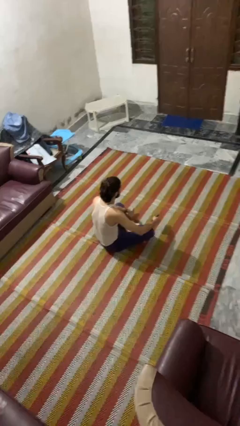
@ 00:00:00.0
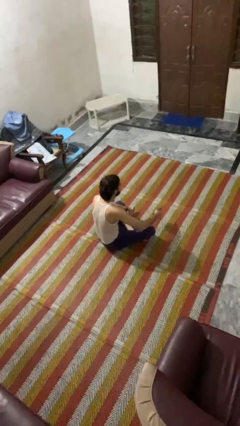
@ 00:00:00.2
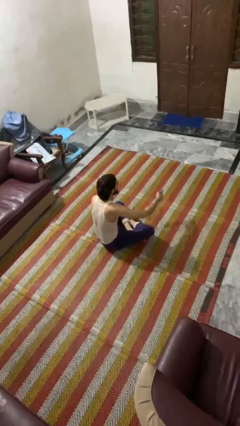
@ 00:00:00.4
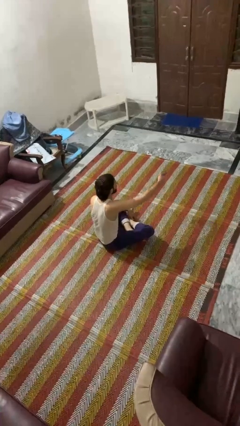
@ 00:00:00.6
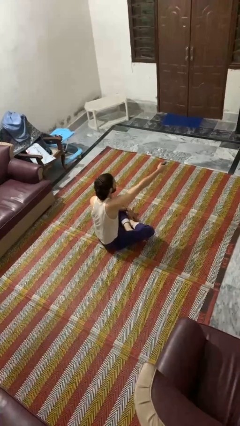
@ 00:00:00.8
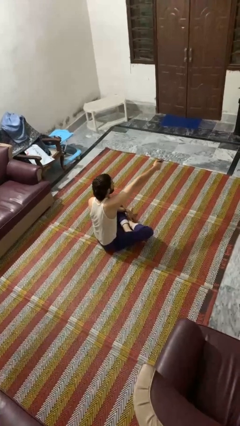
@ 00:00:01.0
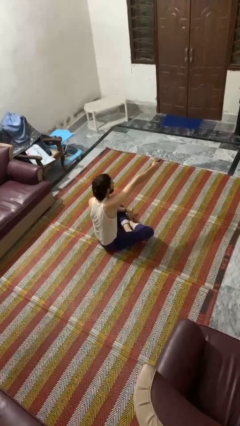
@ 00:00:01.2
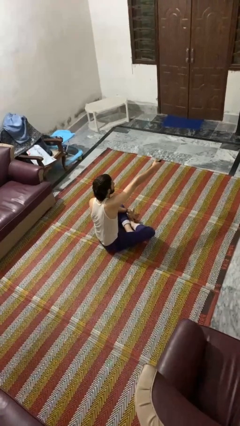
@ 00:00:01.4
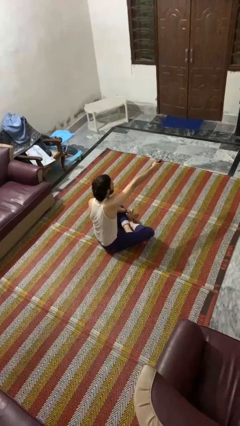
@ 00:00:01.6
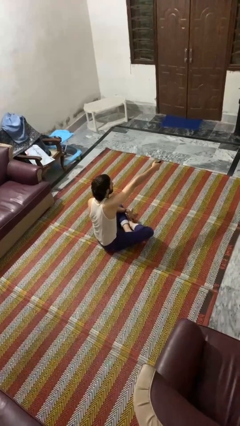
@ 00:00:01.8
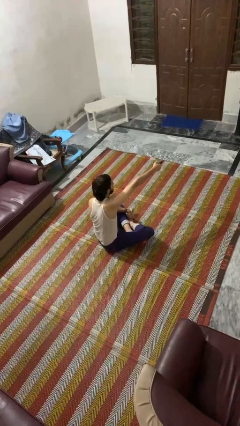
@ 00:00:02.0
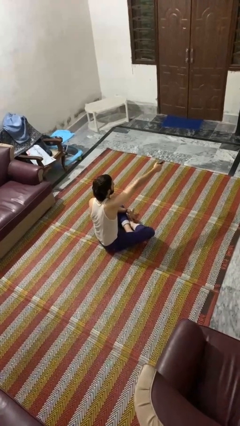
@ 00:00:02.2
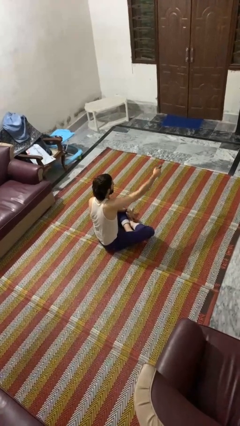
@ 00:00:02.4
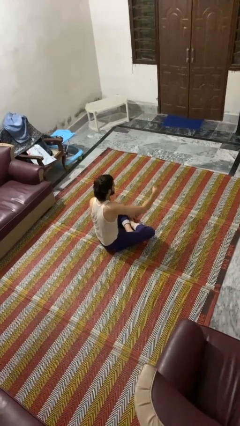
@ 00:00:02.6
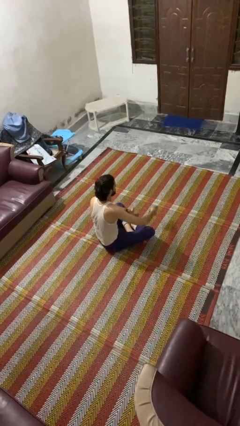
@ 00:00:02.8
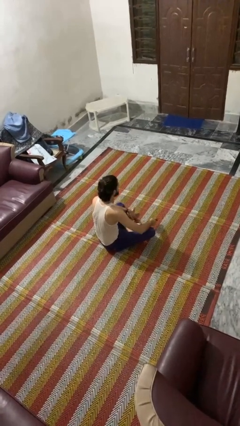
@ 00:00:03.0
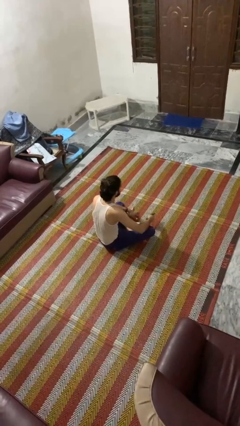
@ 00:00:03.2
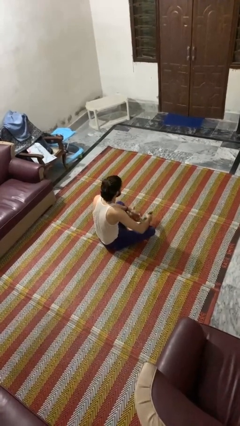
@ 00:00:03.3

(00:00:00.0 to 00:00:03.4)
person uses television remote

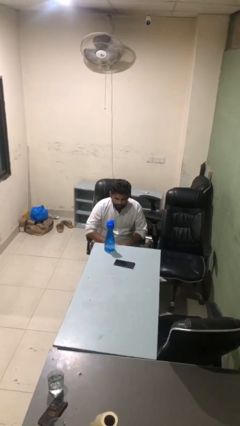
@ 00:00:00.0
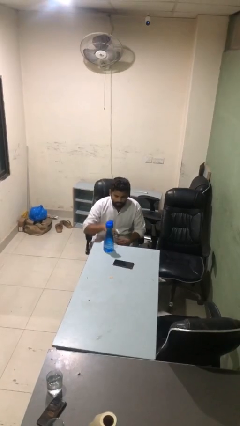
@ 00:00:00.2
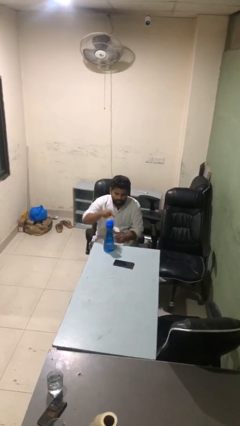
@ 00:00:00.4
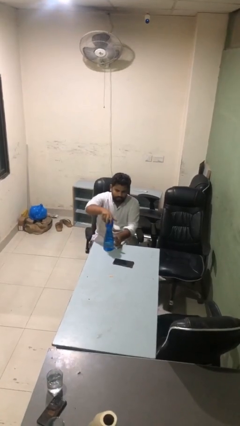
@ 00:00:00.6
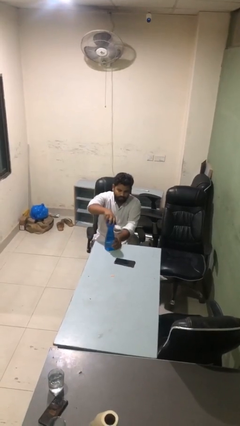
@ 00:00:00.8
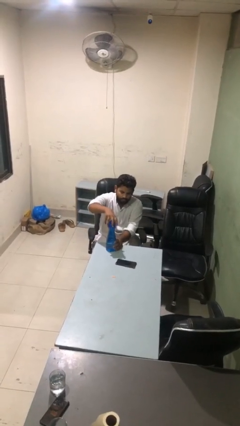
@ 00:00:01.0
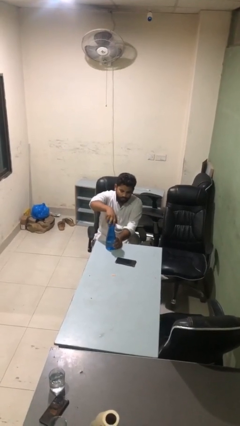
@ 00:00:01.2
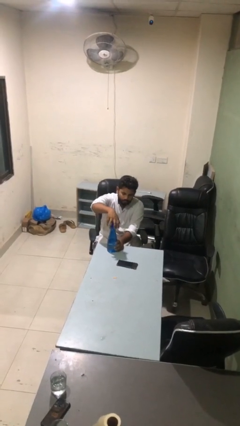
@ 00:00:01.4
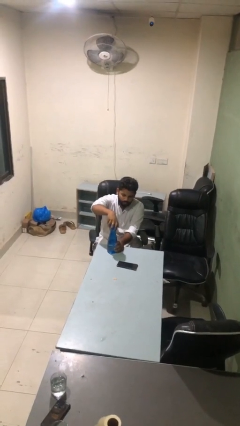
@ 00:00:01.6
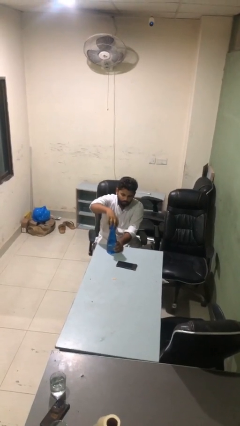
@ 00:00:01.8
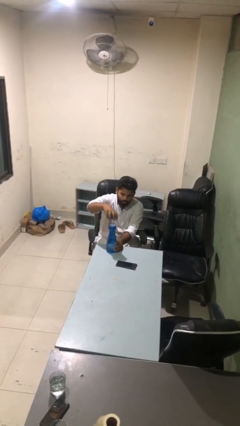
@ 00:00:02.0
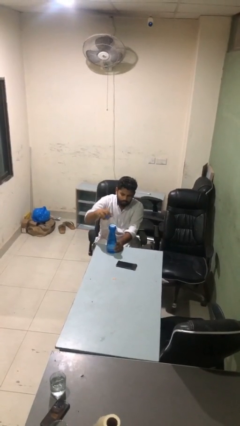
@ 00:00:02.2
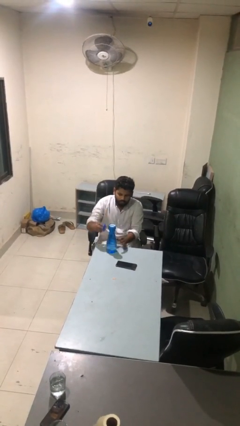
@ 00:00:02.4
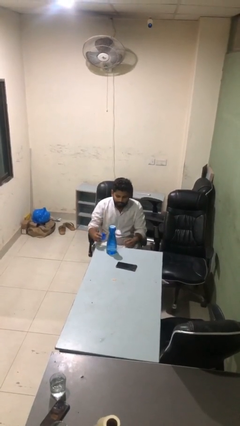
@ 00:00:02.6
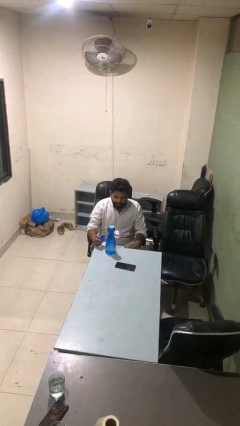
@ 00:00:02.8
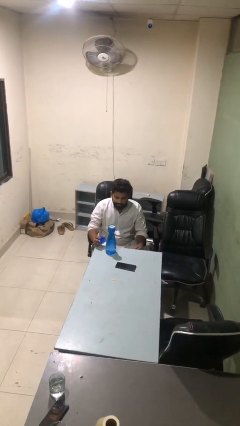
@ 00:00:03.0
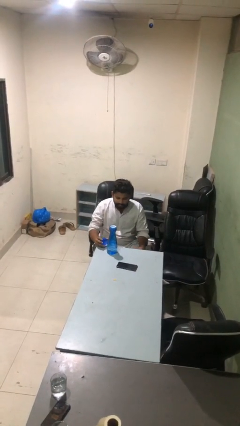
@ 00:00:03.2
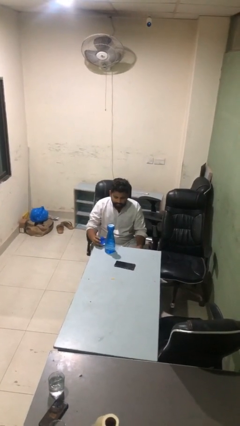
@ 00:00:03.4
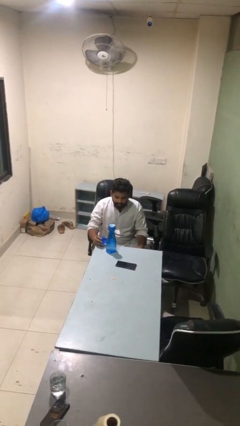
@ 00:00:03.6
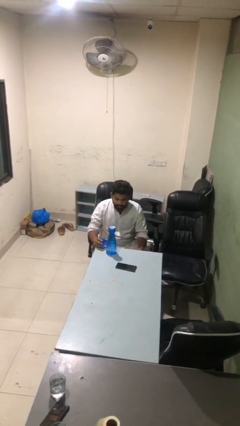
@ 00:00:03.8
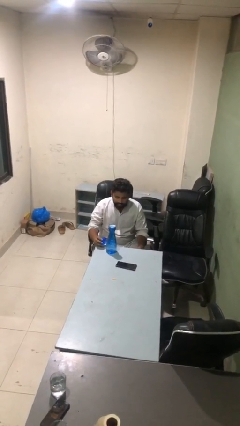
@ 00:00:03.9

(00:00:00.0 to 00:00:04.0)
person unscrews lid from bottle

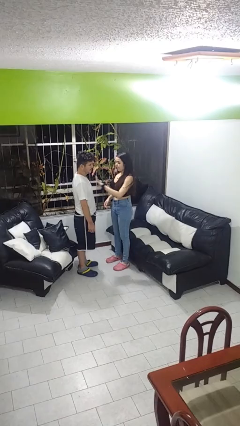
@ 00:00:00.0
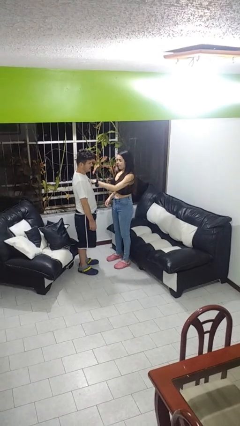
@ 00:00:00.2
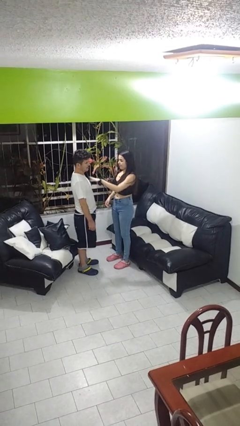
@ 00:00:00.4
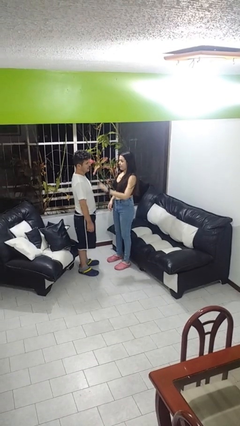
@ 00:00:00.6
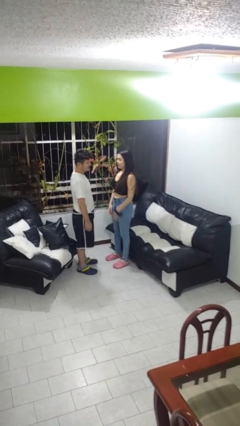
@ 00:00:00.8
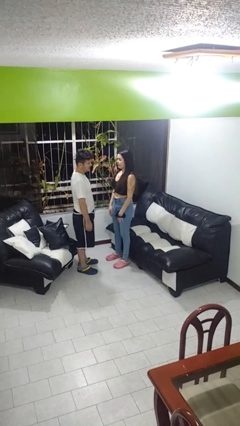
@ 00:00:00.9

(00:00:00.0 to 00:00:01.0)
person shoves person

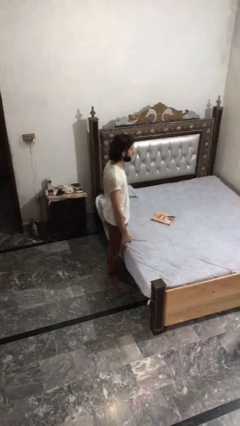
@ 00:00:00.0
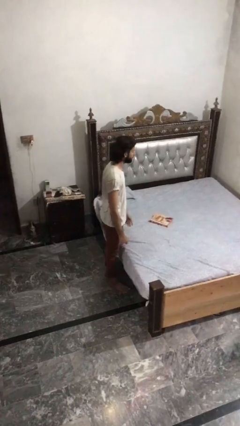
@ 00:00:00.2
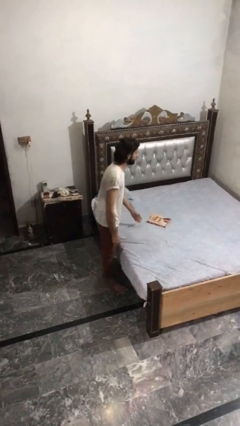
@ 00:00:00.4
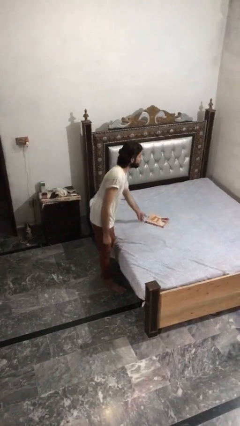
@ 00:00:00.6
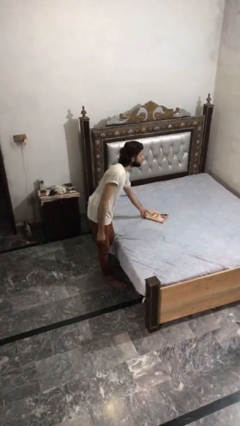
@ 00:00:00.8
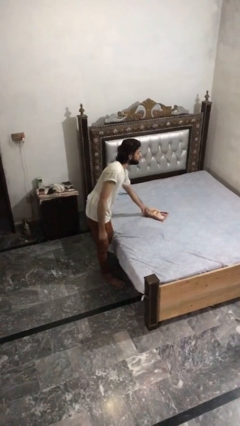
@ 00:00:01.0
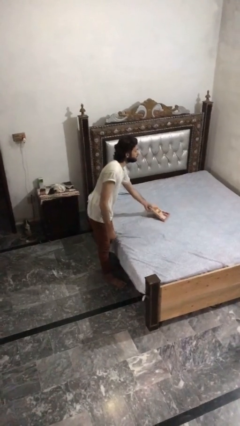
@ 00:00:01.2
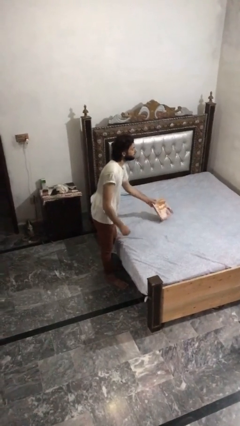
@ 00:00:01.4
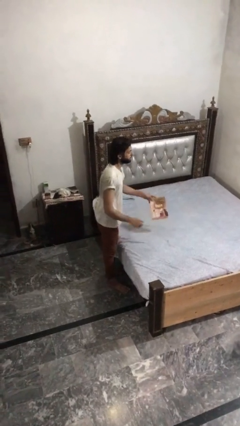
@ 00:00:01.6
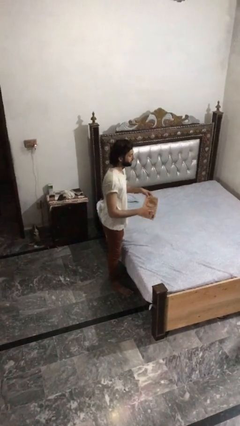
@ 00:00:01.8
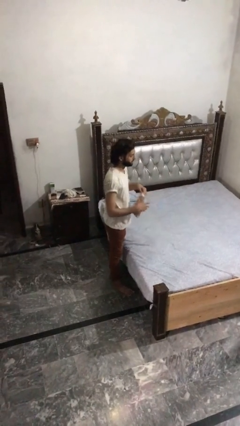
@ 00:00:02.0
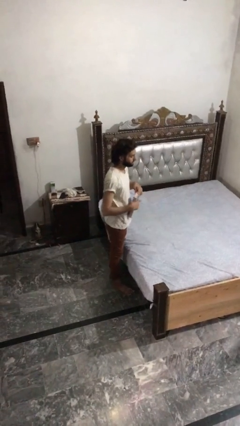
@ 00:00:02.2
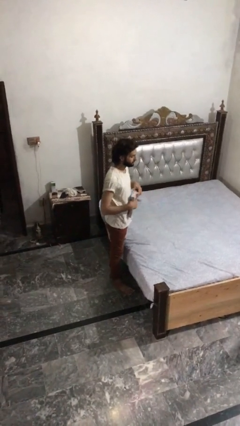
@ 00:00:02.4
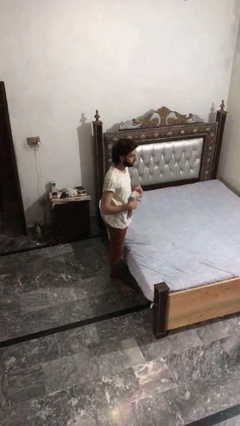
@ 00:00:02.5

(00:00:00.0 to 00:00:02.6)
person picks up object from bed

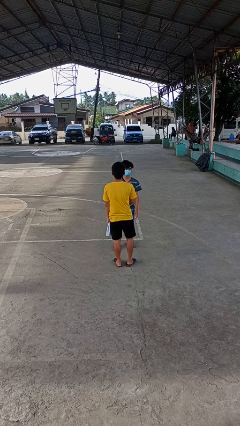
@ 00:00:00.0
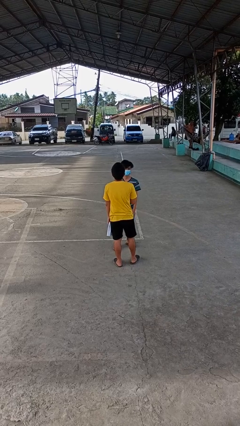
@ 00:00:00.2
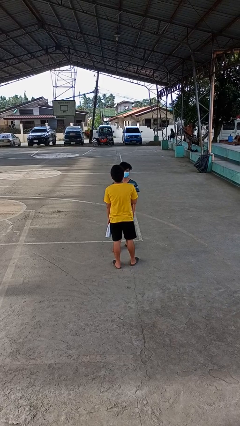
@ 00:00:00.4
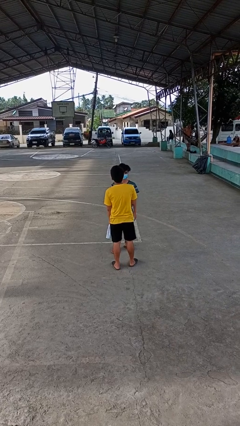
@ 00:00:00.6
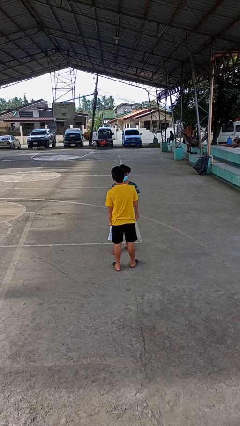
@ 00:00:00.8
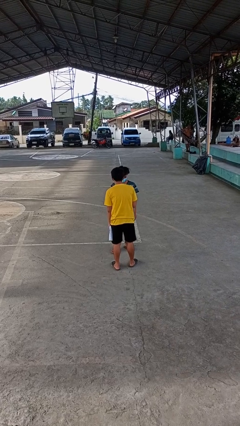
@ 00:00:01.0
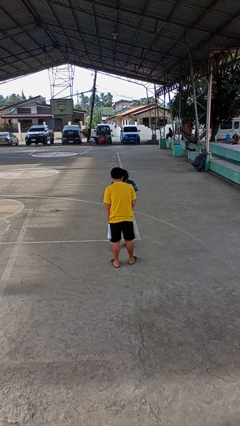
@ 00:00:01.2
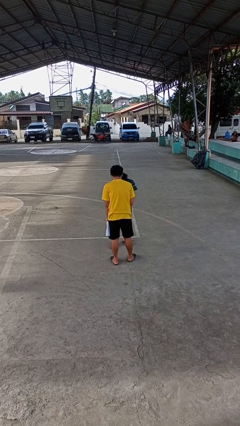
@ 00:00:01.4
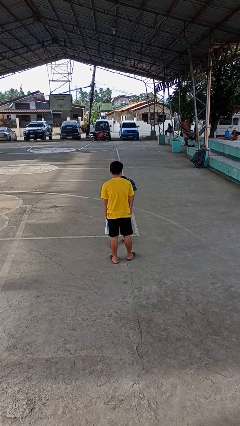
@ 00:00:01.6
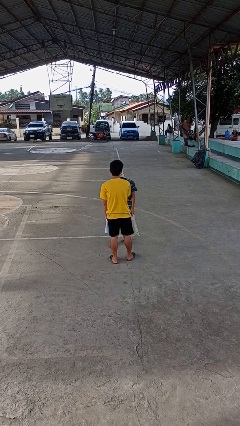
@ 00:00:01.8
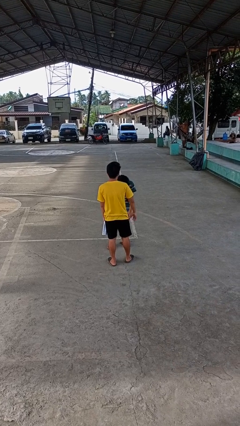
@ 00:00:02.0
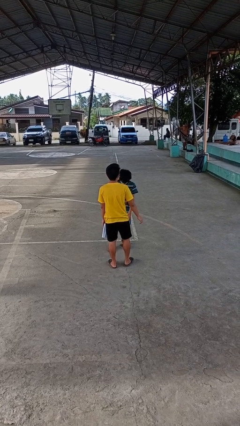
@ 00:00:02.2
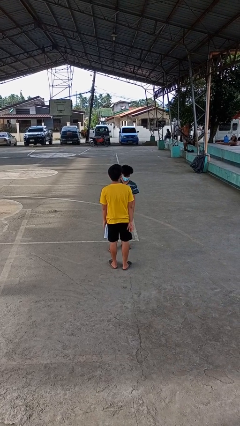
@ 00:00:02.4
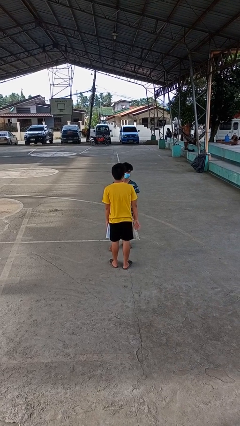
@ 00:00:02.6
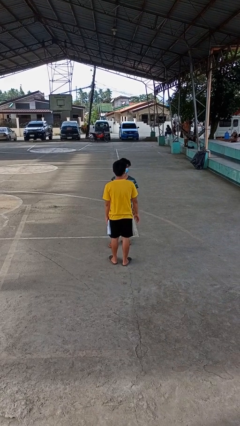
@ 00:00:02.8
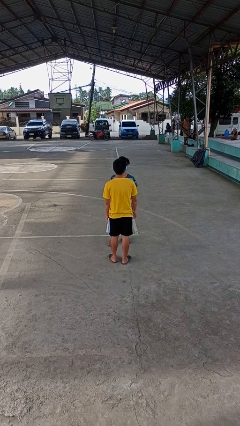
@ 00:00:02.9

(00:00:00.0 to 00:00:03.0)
person laughs with person

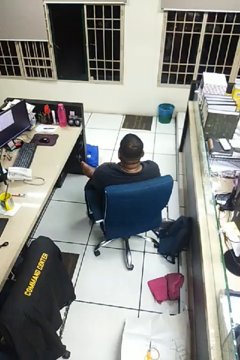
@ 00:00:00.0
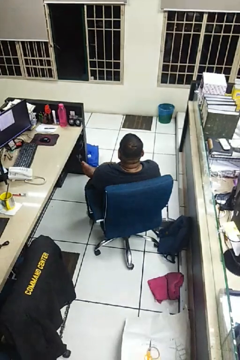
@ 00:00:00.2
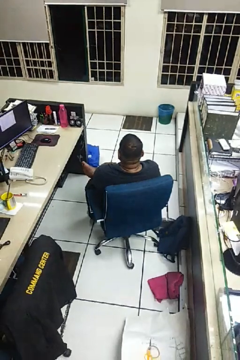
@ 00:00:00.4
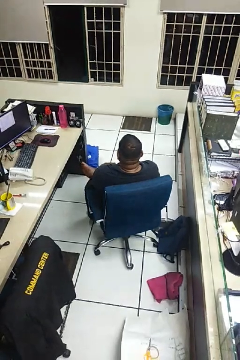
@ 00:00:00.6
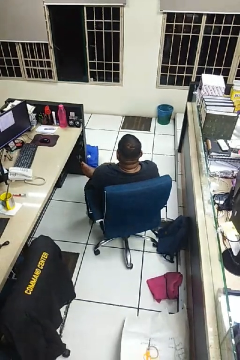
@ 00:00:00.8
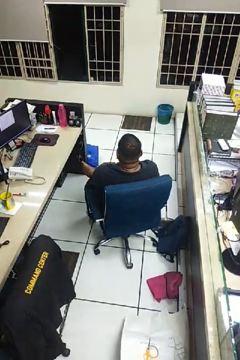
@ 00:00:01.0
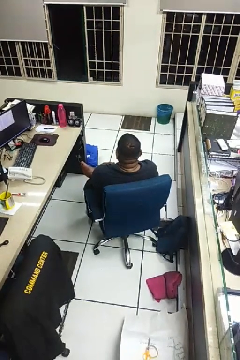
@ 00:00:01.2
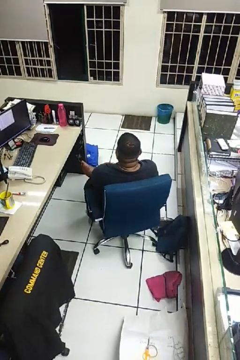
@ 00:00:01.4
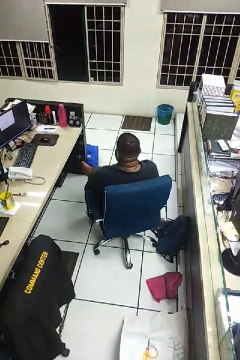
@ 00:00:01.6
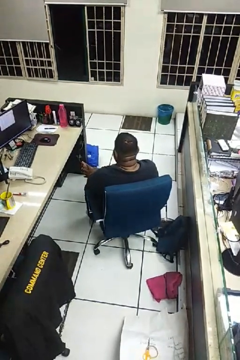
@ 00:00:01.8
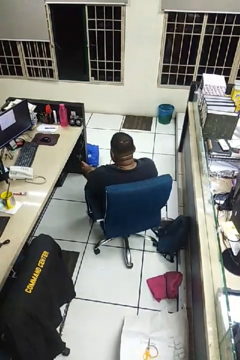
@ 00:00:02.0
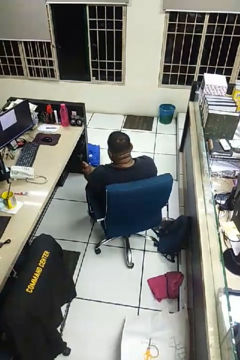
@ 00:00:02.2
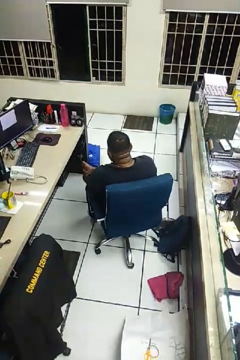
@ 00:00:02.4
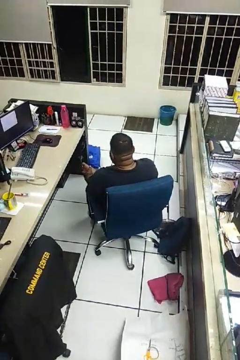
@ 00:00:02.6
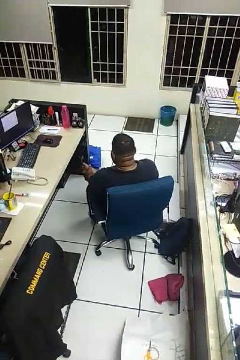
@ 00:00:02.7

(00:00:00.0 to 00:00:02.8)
person rubs foot

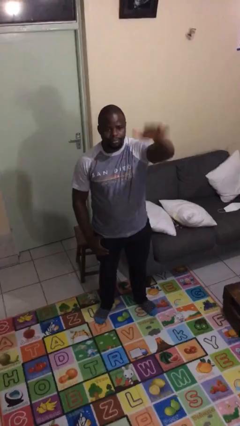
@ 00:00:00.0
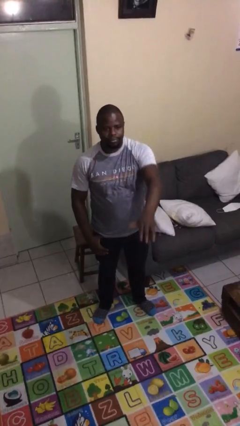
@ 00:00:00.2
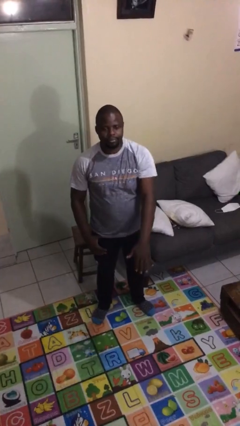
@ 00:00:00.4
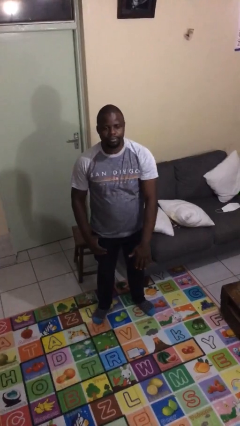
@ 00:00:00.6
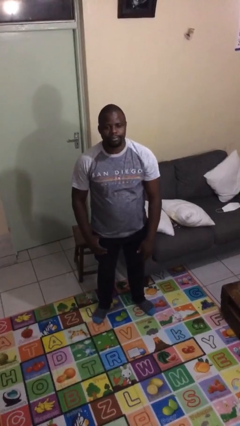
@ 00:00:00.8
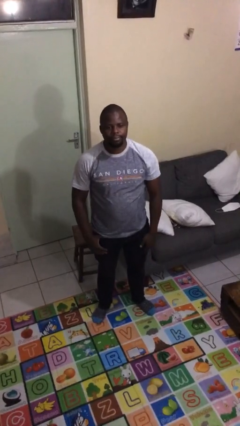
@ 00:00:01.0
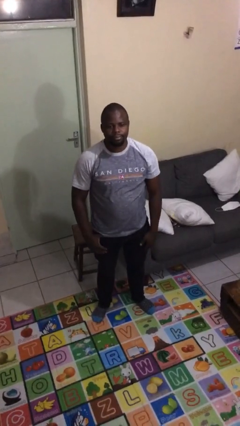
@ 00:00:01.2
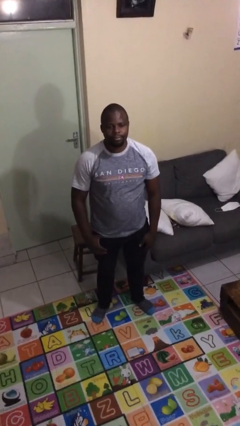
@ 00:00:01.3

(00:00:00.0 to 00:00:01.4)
person gestures swipe down
